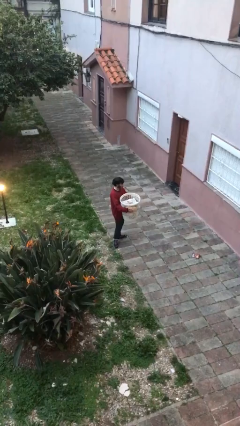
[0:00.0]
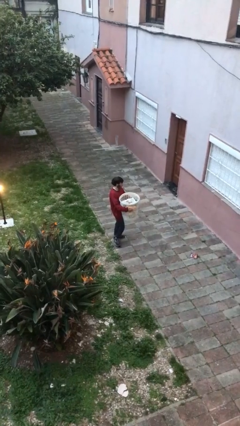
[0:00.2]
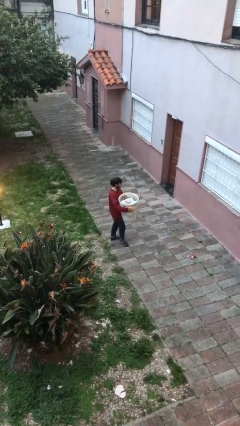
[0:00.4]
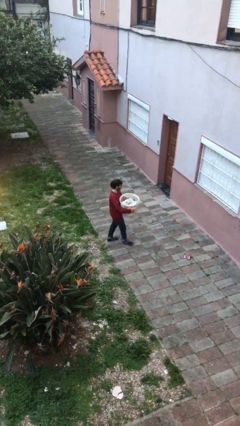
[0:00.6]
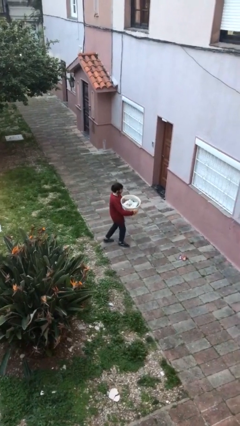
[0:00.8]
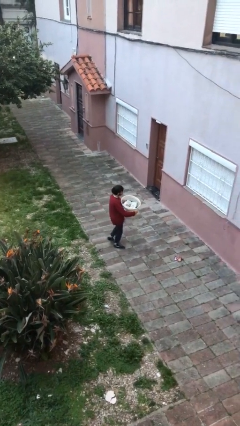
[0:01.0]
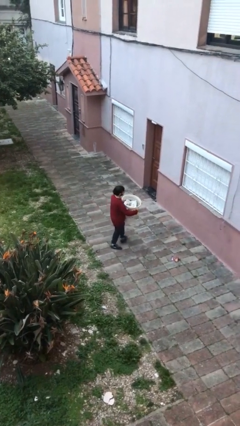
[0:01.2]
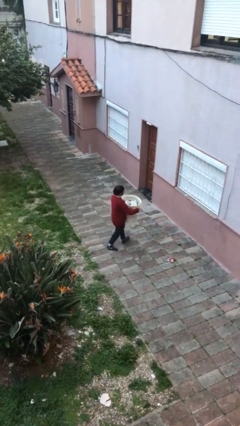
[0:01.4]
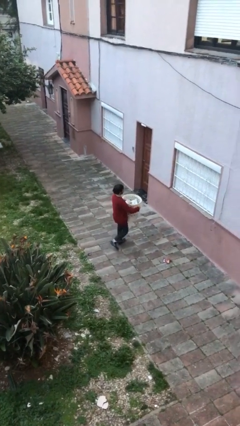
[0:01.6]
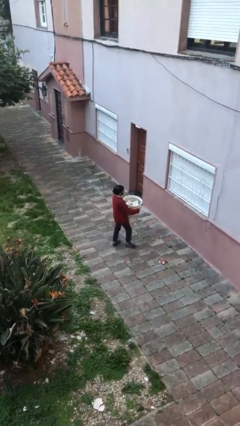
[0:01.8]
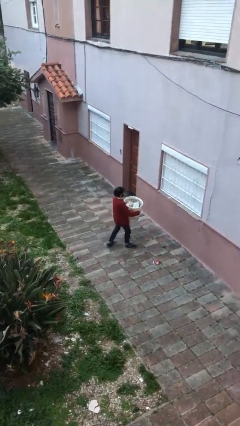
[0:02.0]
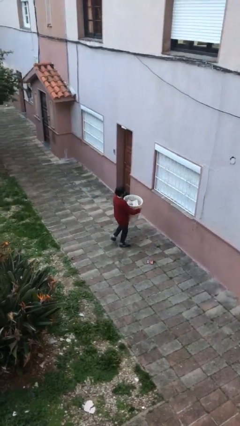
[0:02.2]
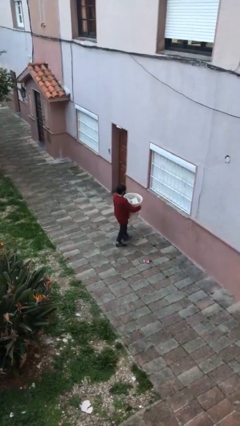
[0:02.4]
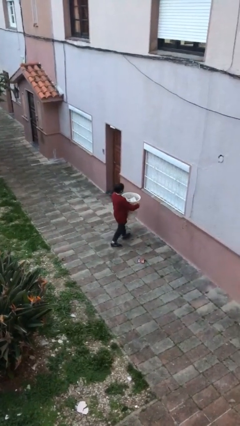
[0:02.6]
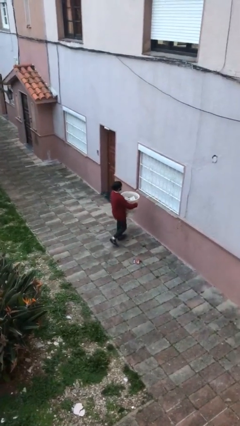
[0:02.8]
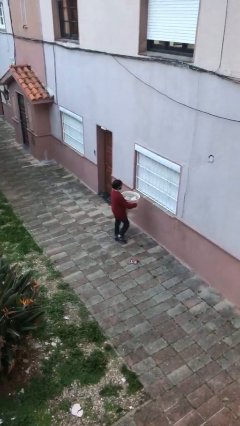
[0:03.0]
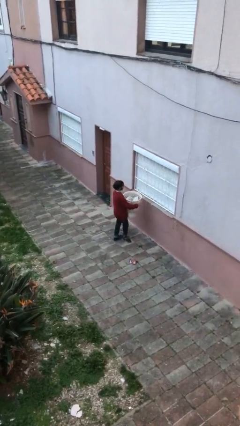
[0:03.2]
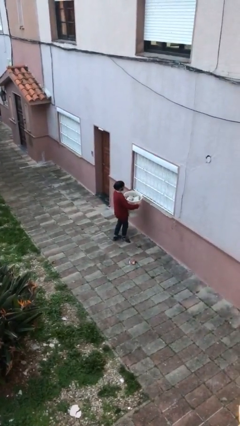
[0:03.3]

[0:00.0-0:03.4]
person carries laundry basket

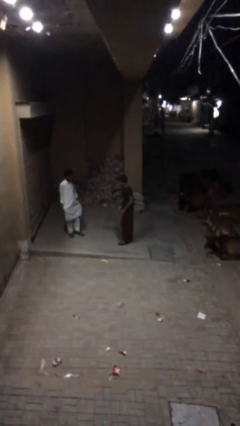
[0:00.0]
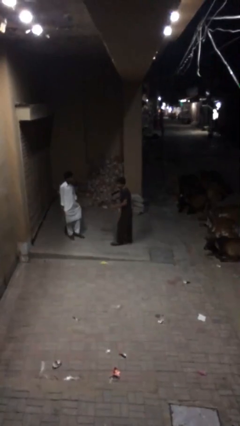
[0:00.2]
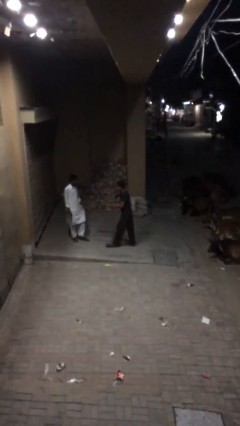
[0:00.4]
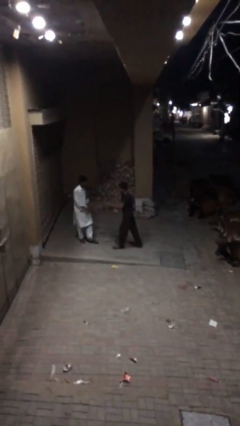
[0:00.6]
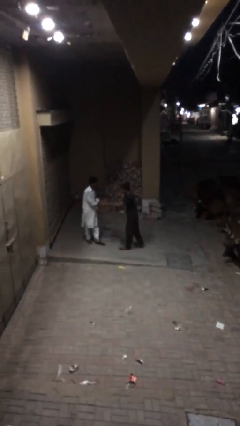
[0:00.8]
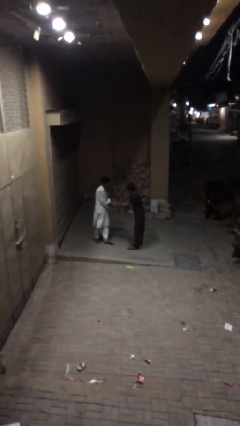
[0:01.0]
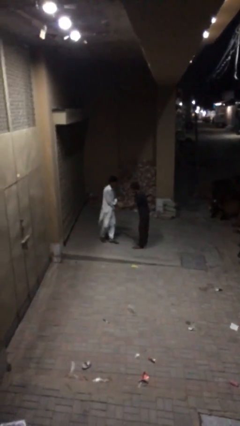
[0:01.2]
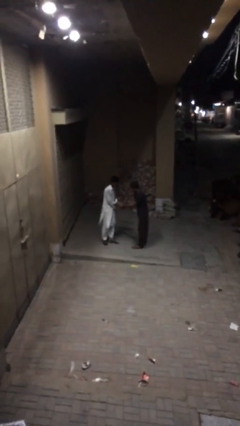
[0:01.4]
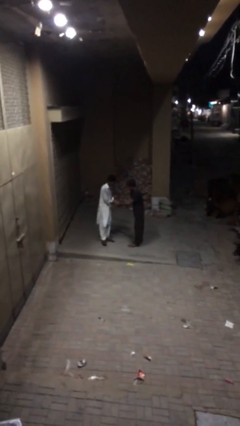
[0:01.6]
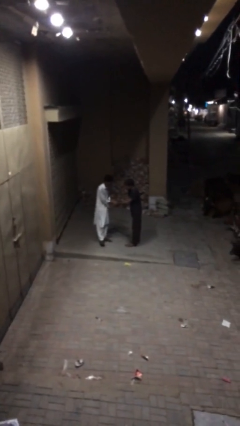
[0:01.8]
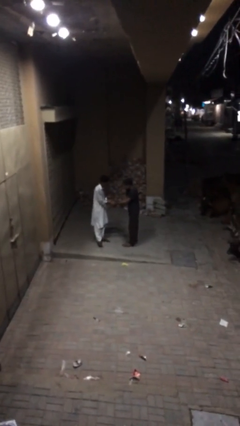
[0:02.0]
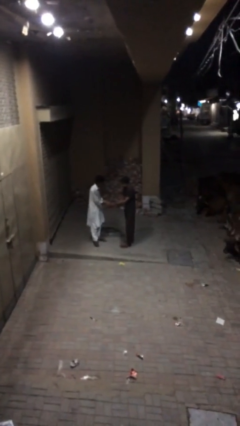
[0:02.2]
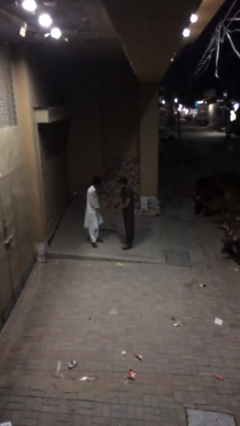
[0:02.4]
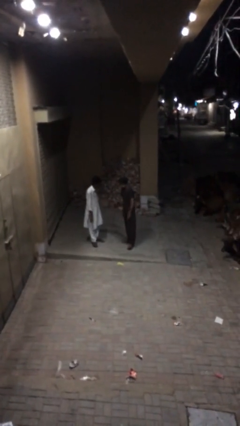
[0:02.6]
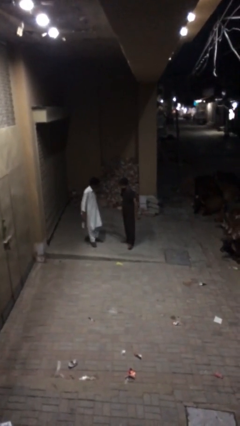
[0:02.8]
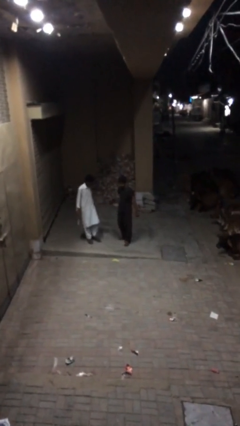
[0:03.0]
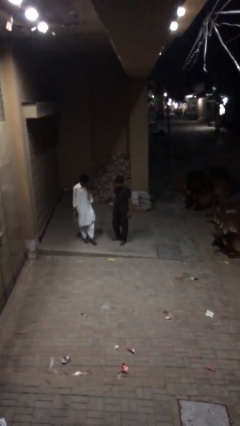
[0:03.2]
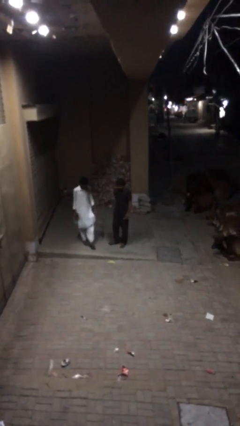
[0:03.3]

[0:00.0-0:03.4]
person shakes hand

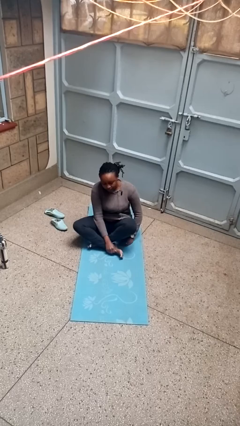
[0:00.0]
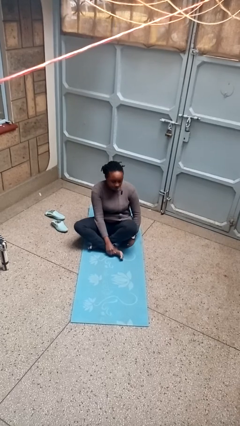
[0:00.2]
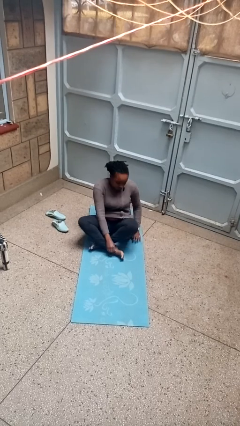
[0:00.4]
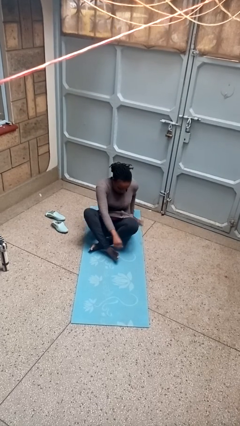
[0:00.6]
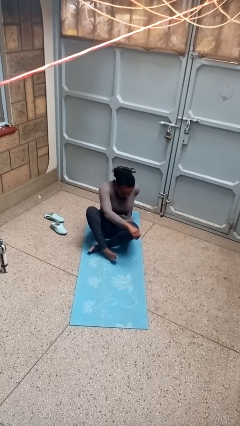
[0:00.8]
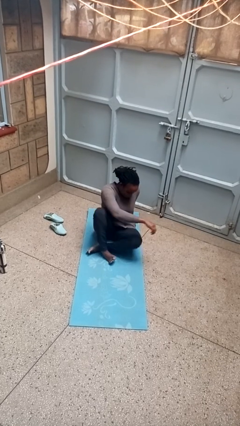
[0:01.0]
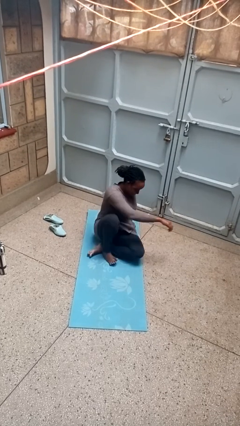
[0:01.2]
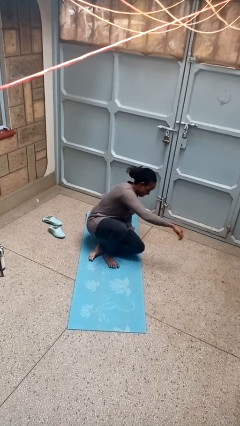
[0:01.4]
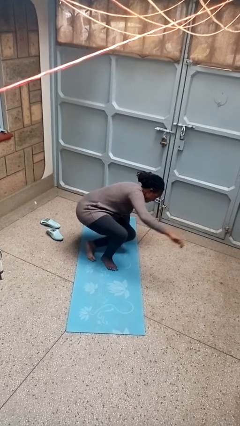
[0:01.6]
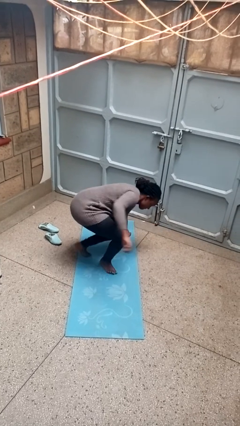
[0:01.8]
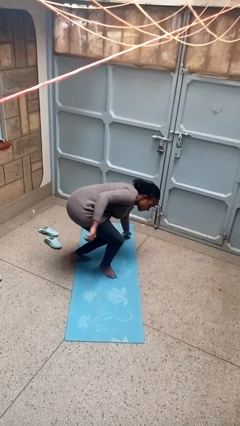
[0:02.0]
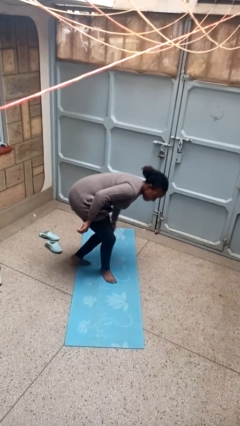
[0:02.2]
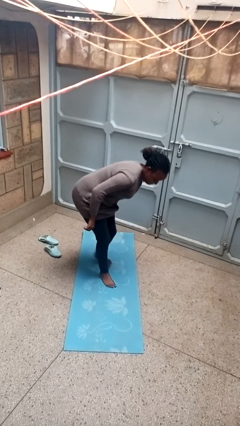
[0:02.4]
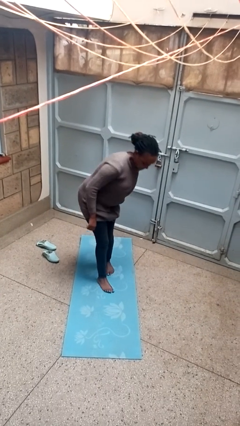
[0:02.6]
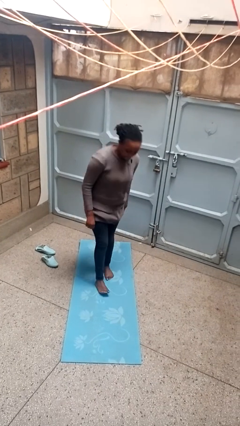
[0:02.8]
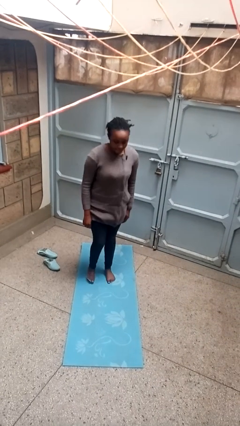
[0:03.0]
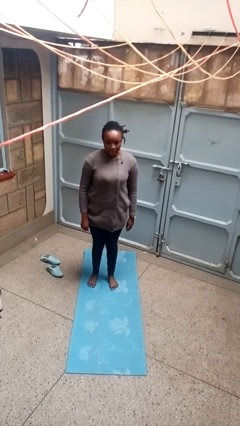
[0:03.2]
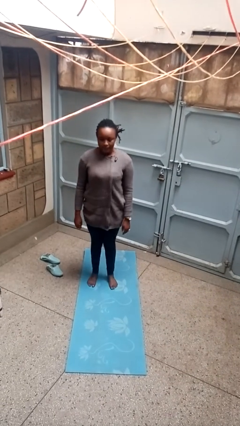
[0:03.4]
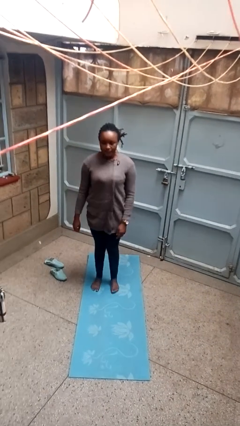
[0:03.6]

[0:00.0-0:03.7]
person stands up from floor

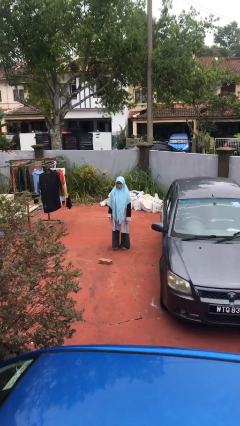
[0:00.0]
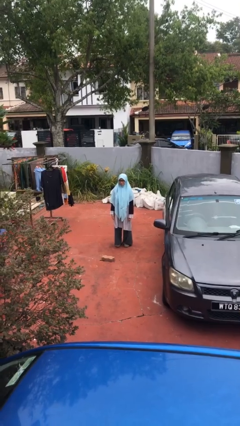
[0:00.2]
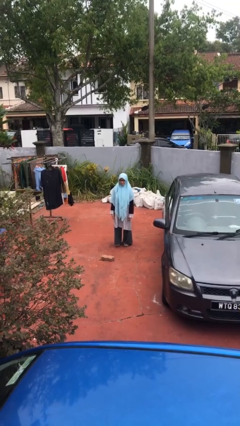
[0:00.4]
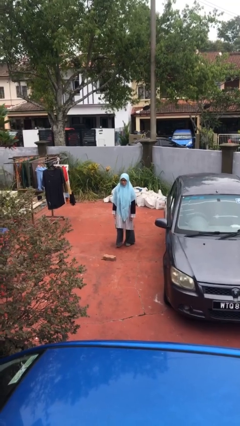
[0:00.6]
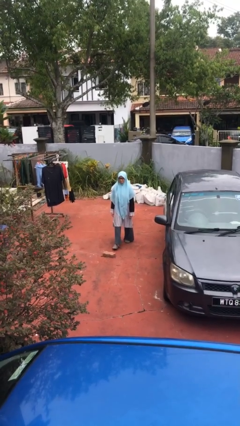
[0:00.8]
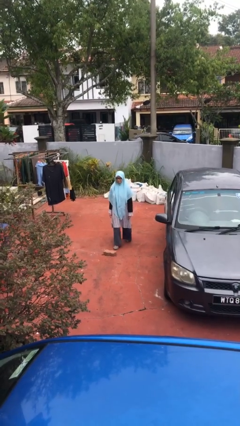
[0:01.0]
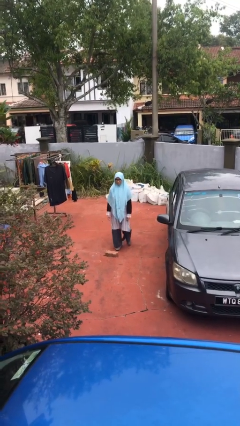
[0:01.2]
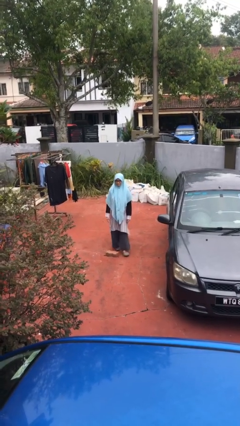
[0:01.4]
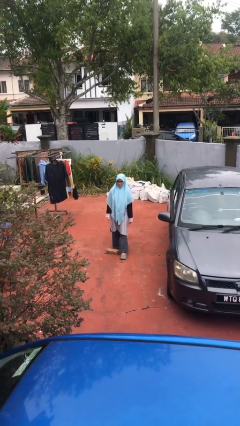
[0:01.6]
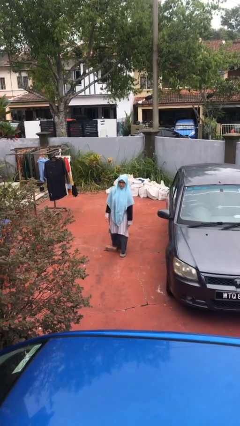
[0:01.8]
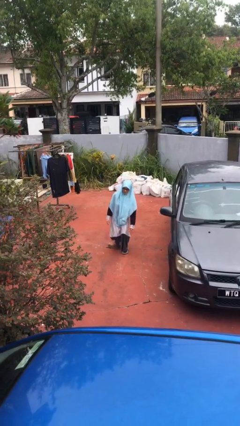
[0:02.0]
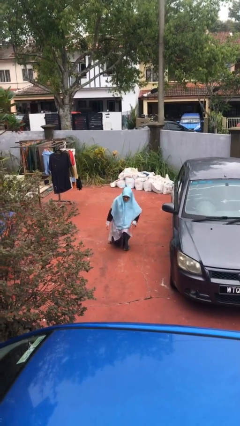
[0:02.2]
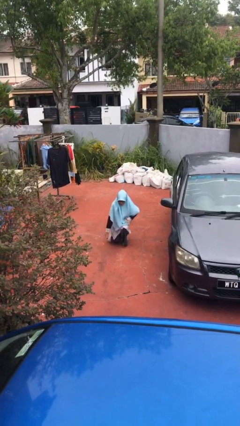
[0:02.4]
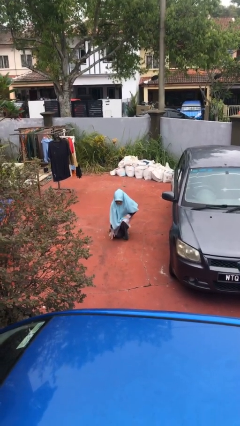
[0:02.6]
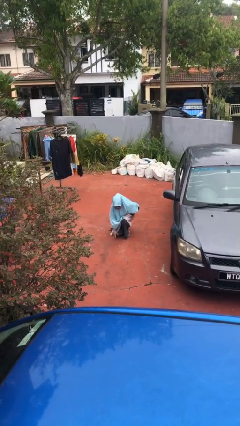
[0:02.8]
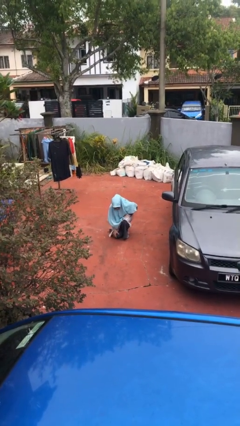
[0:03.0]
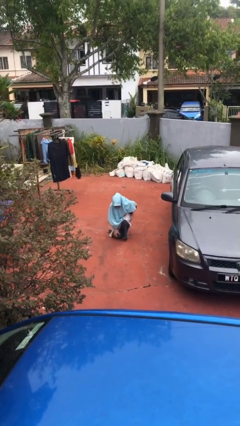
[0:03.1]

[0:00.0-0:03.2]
person trips on object on floor

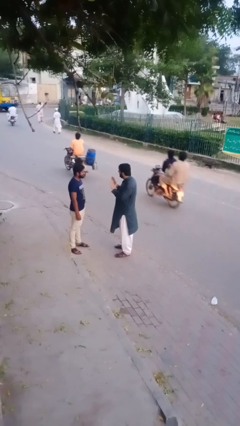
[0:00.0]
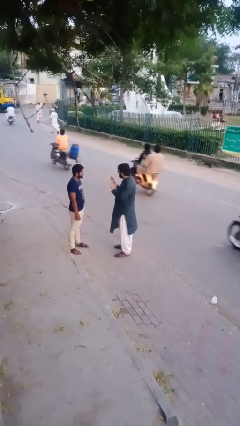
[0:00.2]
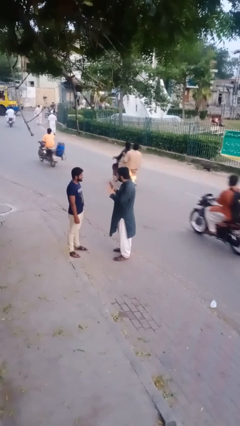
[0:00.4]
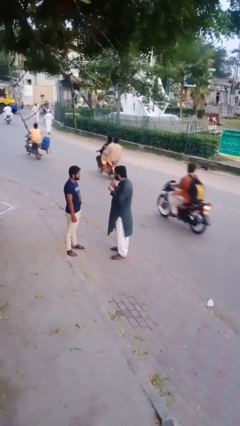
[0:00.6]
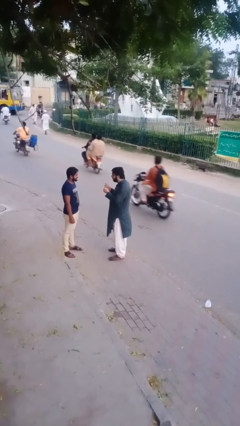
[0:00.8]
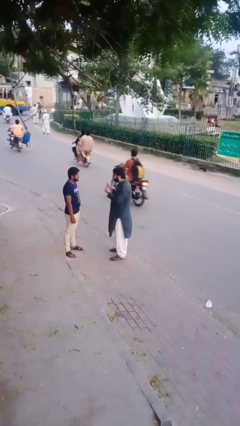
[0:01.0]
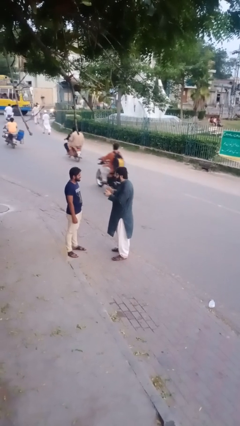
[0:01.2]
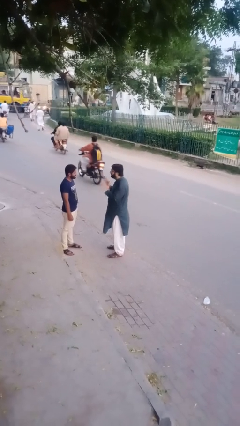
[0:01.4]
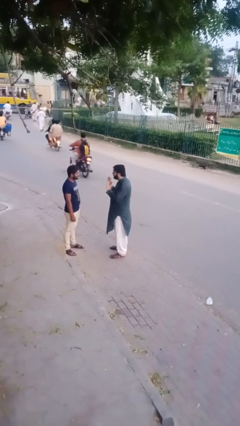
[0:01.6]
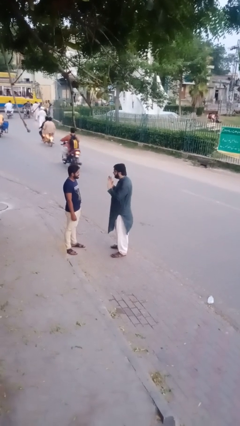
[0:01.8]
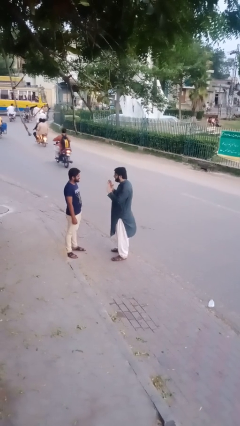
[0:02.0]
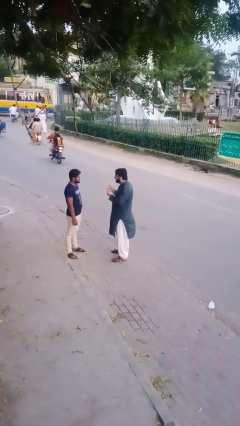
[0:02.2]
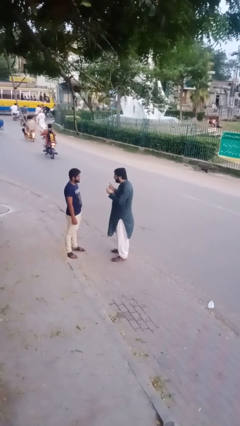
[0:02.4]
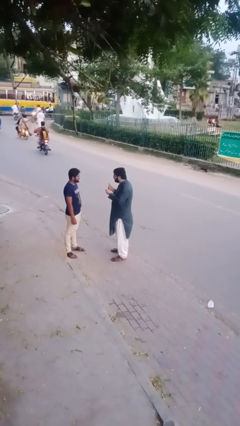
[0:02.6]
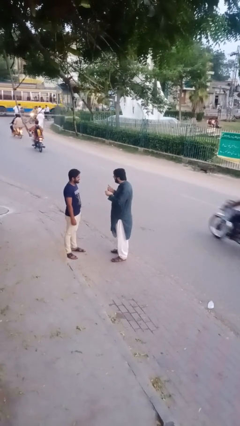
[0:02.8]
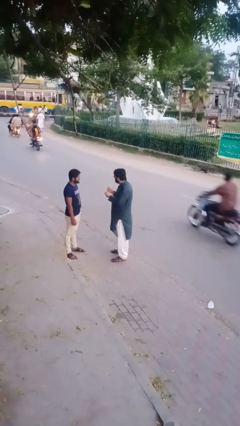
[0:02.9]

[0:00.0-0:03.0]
person talks to person

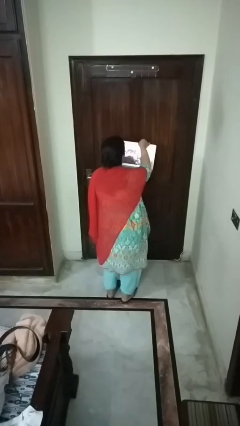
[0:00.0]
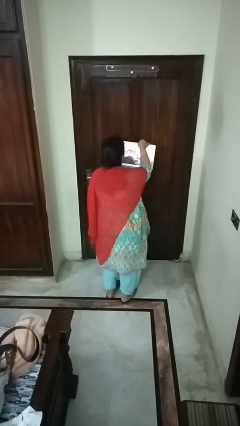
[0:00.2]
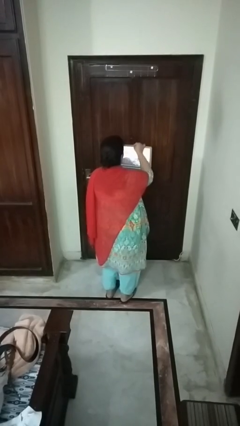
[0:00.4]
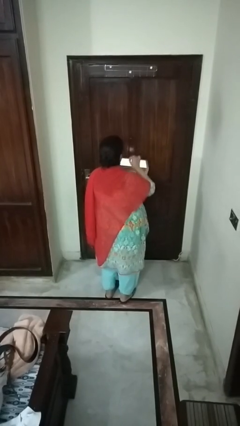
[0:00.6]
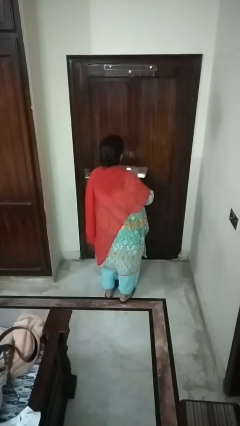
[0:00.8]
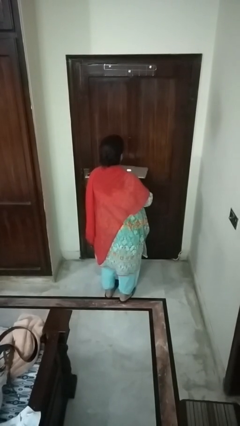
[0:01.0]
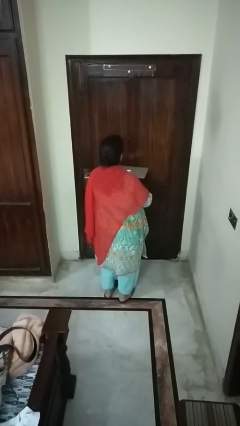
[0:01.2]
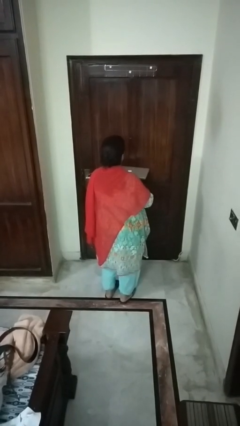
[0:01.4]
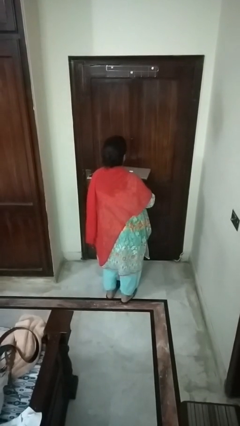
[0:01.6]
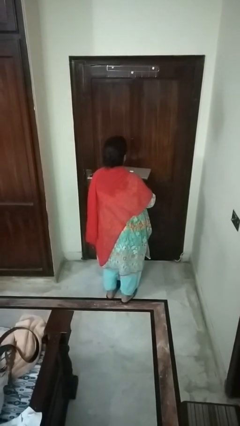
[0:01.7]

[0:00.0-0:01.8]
person closes laptop
